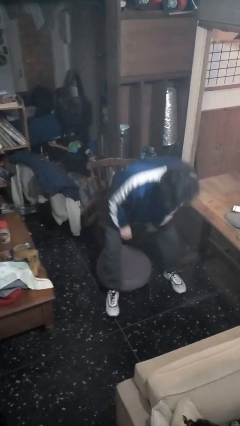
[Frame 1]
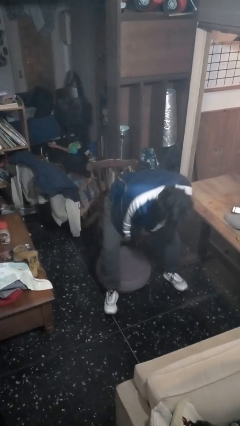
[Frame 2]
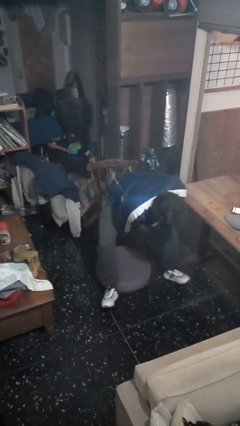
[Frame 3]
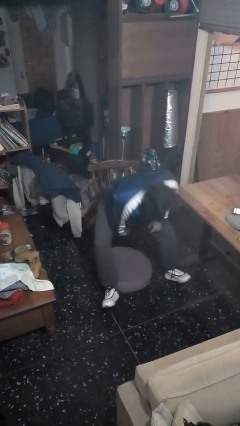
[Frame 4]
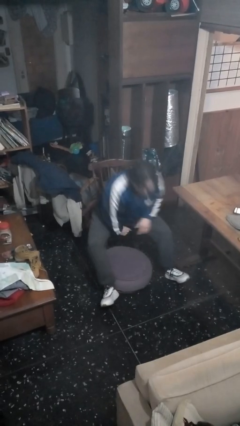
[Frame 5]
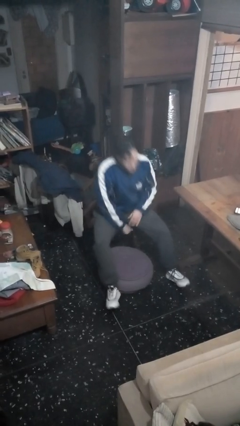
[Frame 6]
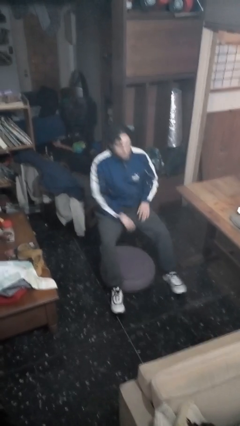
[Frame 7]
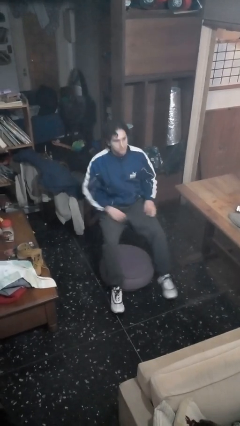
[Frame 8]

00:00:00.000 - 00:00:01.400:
person sits down

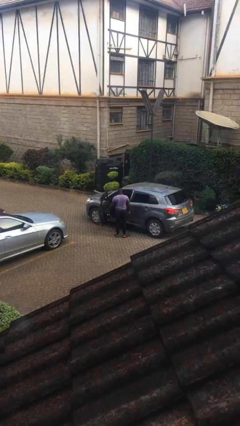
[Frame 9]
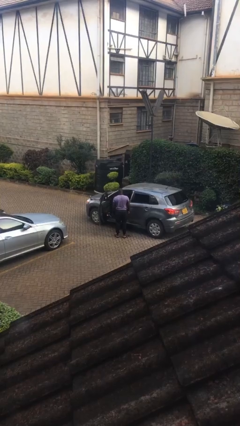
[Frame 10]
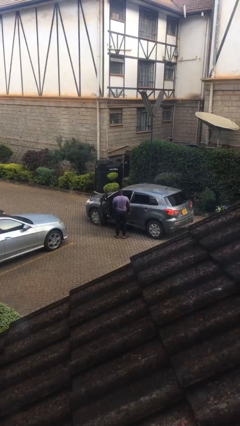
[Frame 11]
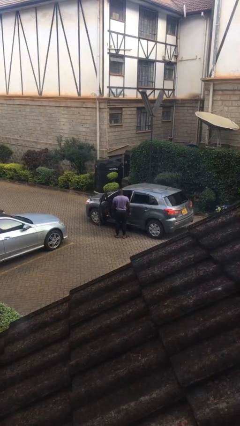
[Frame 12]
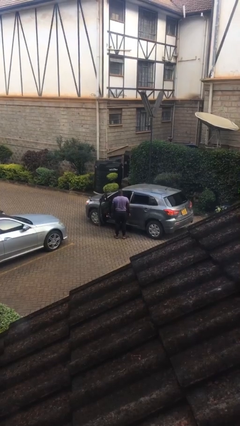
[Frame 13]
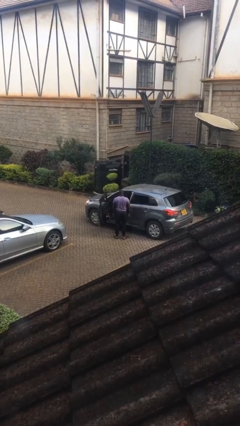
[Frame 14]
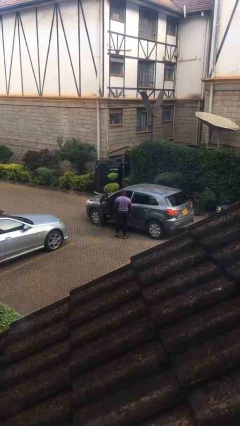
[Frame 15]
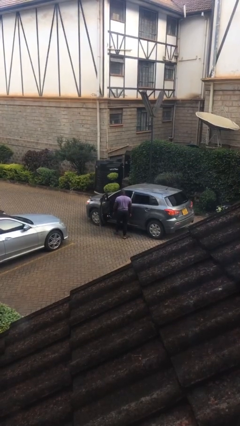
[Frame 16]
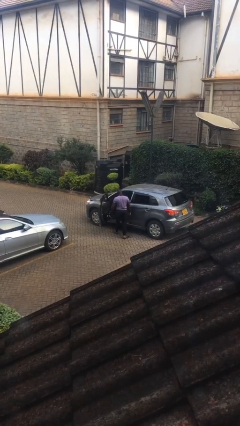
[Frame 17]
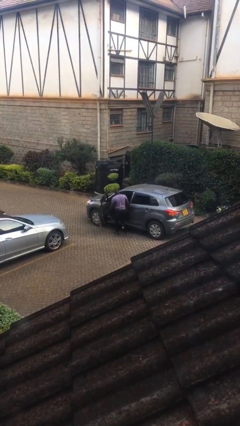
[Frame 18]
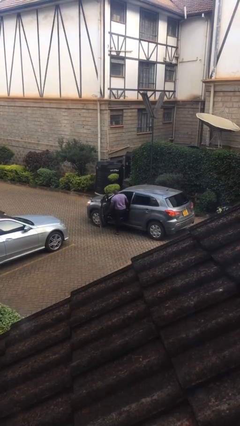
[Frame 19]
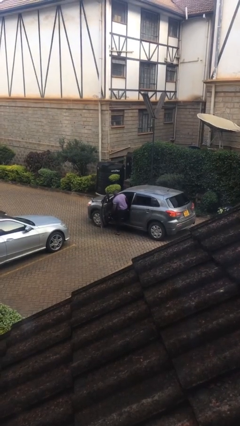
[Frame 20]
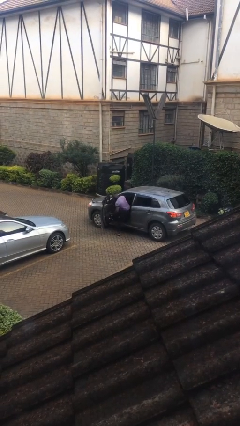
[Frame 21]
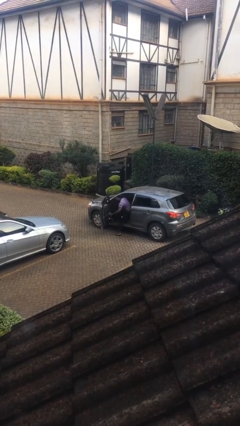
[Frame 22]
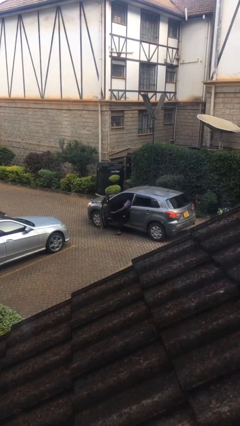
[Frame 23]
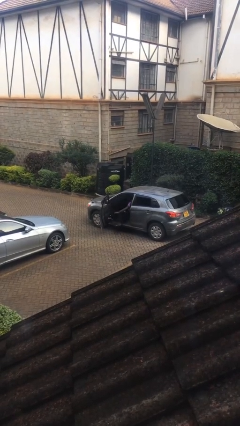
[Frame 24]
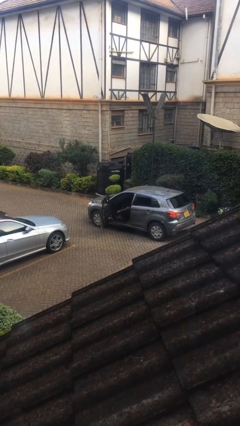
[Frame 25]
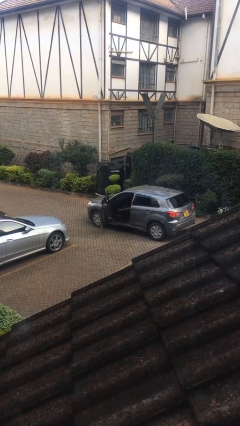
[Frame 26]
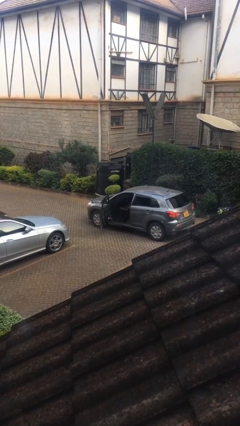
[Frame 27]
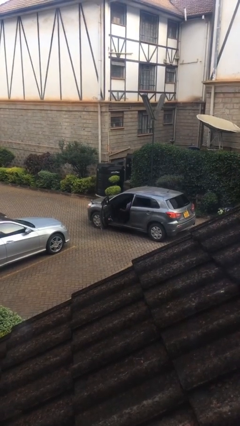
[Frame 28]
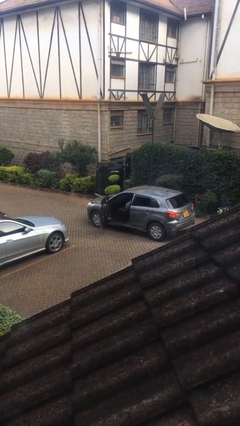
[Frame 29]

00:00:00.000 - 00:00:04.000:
person enters car

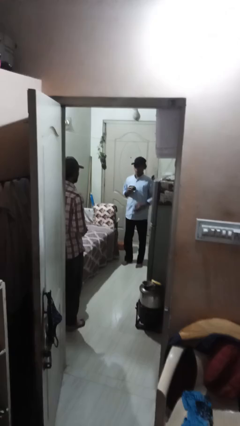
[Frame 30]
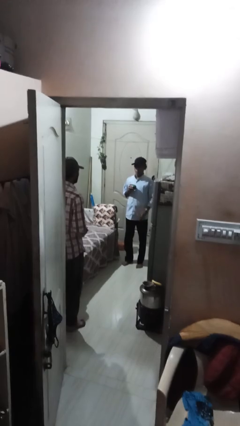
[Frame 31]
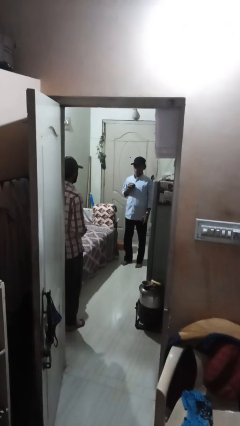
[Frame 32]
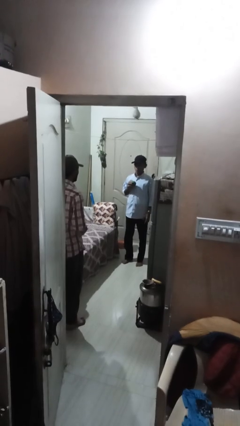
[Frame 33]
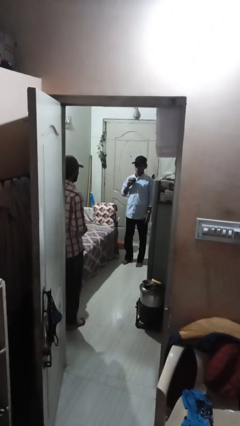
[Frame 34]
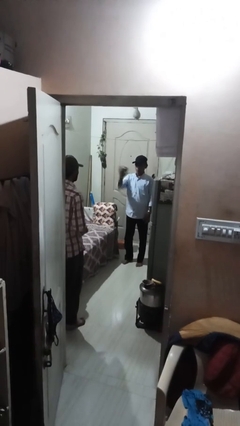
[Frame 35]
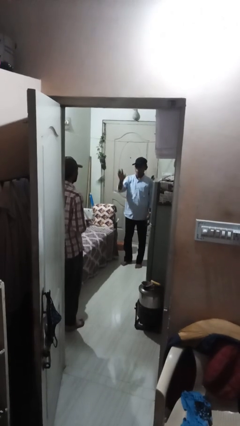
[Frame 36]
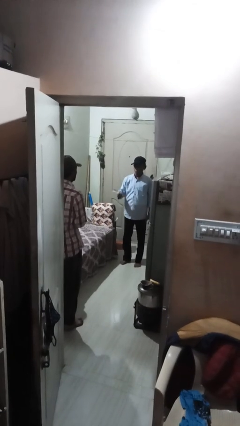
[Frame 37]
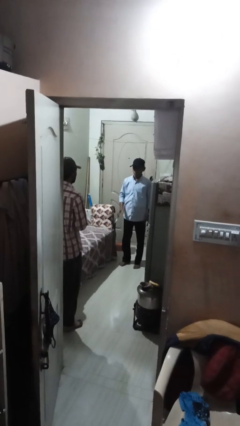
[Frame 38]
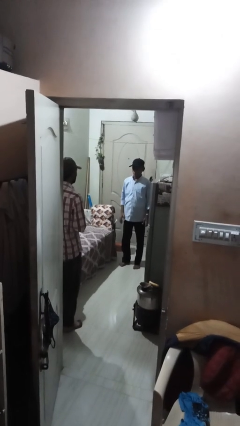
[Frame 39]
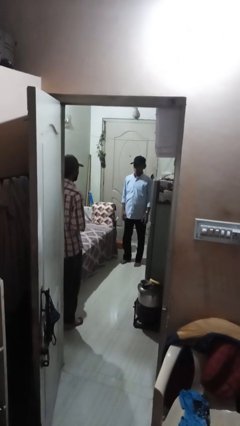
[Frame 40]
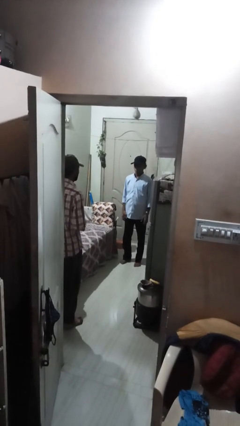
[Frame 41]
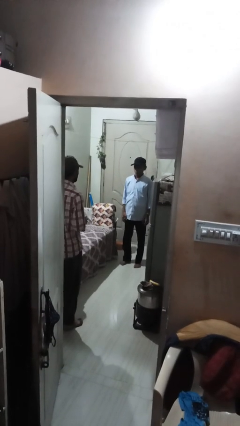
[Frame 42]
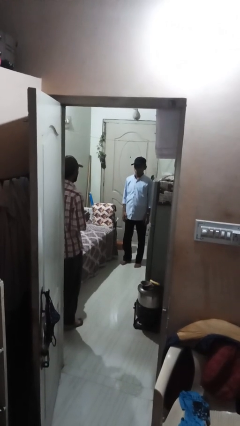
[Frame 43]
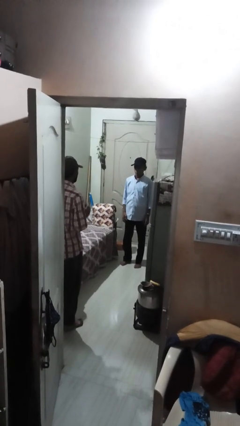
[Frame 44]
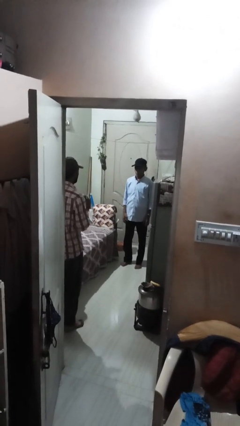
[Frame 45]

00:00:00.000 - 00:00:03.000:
person throws object to person

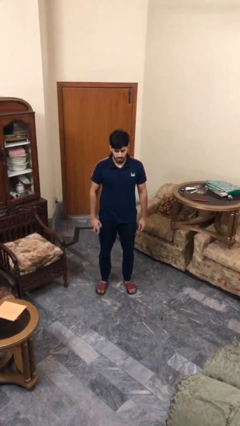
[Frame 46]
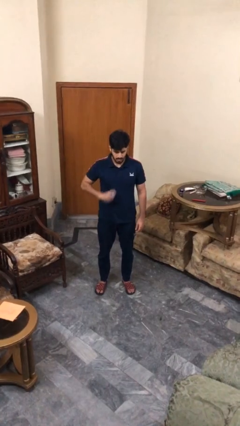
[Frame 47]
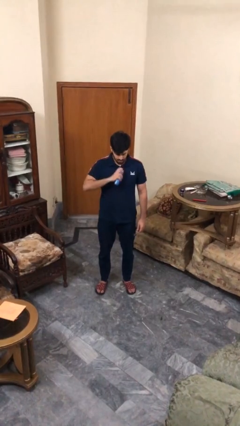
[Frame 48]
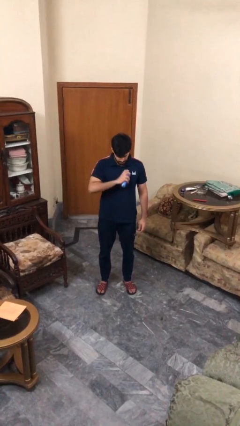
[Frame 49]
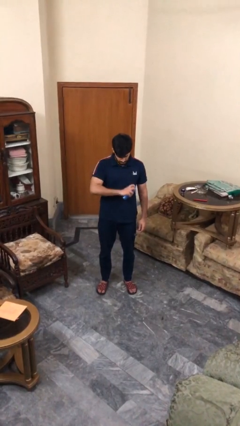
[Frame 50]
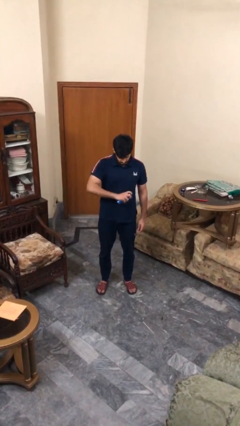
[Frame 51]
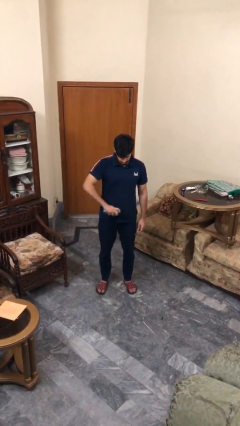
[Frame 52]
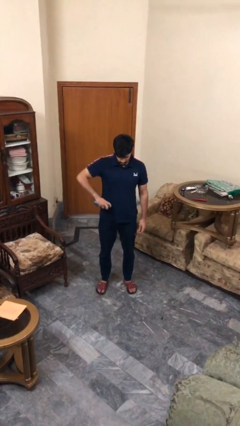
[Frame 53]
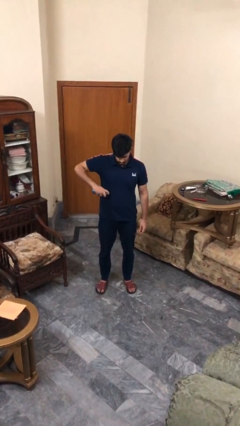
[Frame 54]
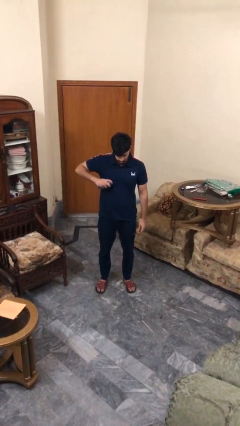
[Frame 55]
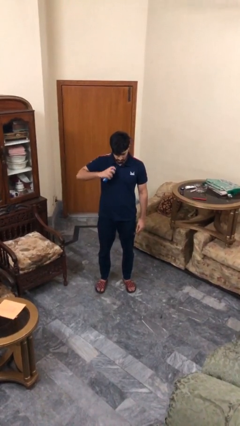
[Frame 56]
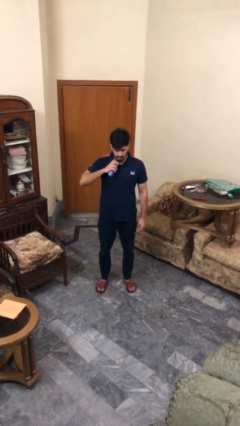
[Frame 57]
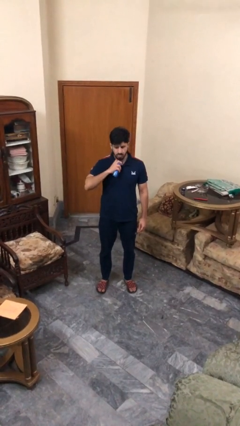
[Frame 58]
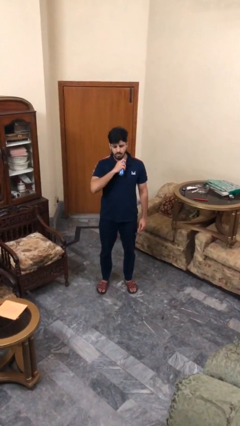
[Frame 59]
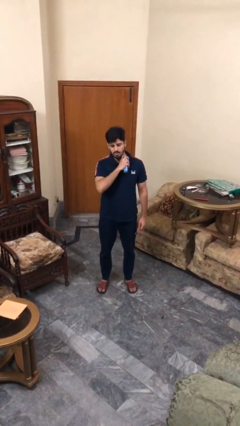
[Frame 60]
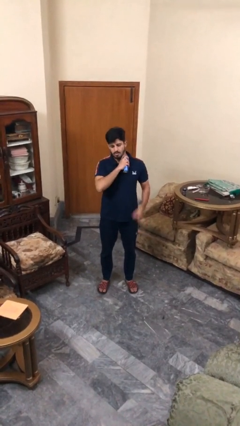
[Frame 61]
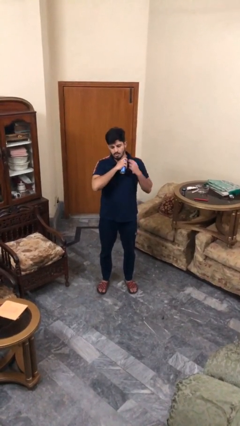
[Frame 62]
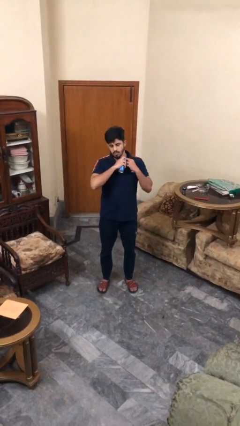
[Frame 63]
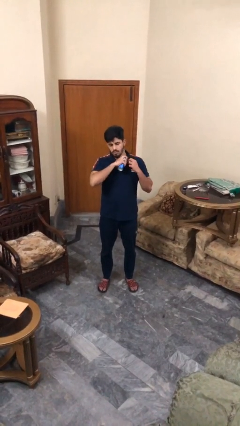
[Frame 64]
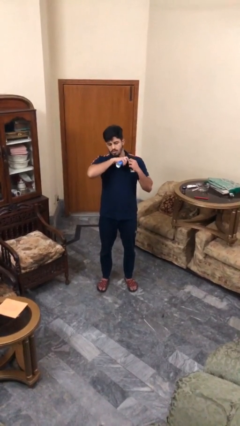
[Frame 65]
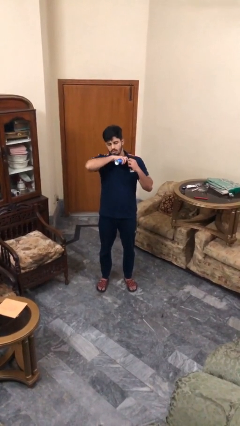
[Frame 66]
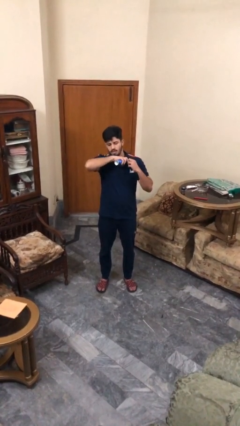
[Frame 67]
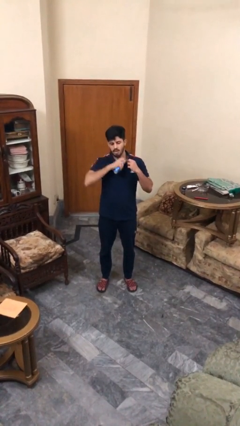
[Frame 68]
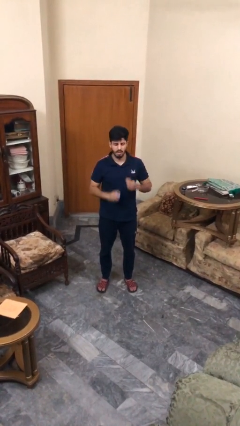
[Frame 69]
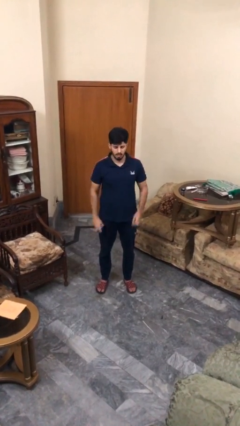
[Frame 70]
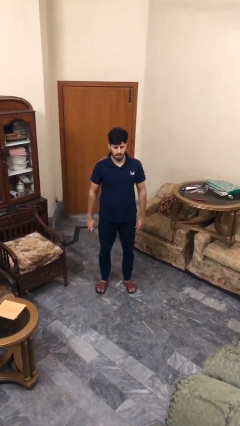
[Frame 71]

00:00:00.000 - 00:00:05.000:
person applies deodorant

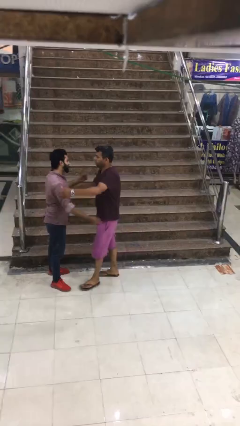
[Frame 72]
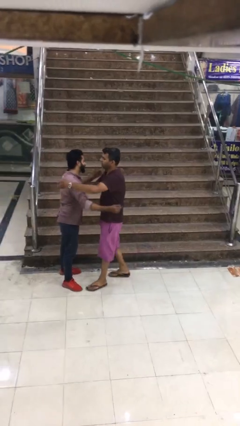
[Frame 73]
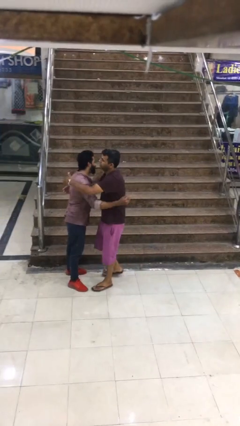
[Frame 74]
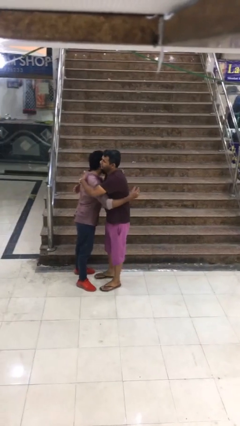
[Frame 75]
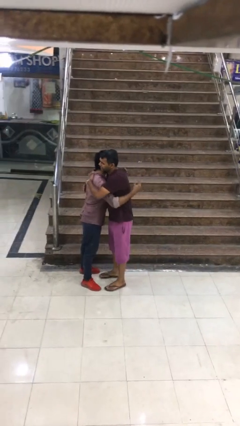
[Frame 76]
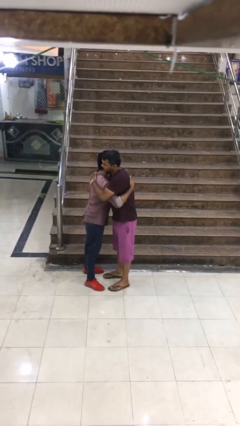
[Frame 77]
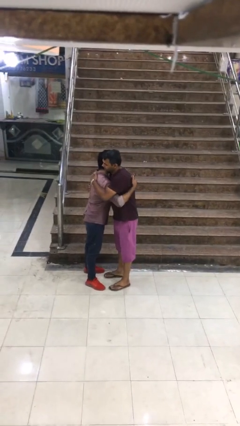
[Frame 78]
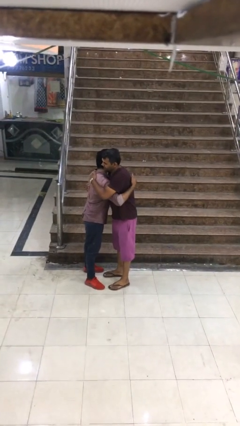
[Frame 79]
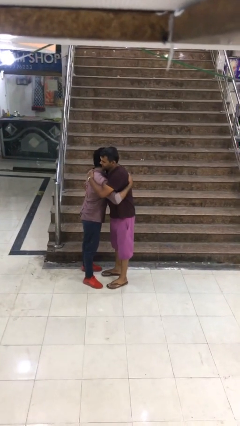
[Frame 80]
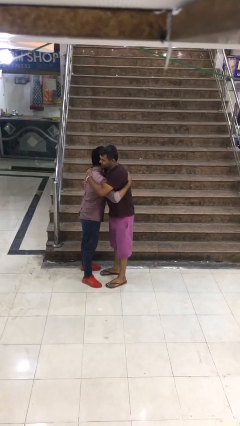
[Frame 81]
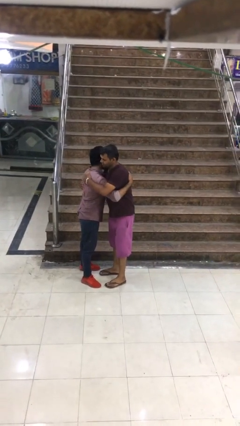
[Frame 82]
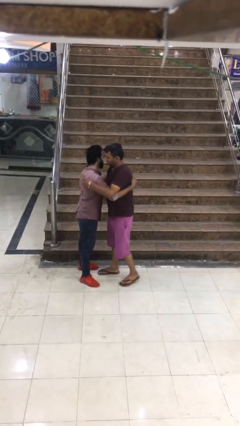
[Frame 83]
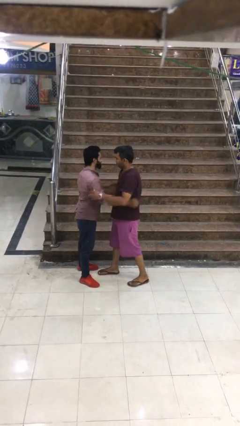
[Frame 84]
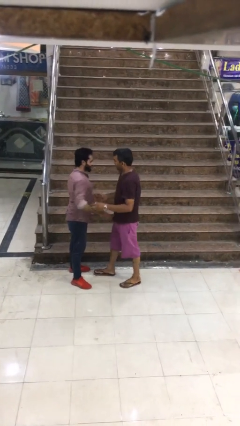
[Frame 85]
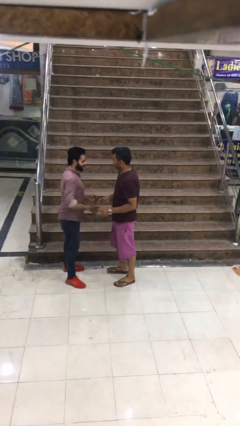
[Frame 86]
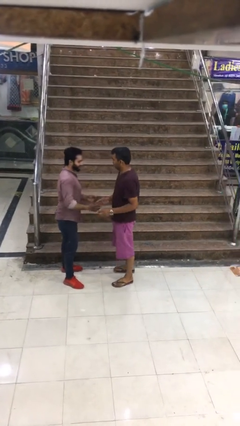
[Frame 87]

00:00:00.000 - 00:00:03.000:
person embraces person

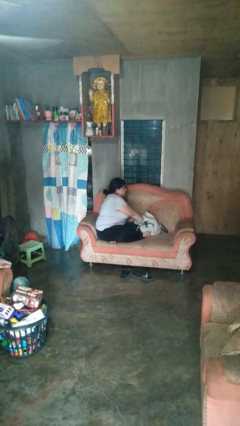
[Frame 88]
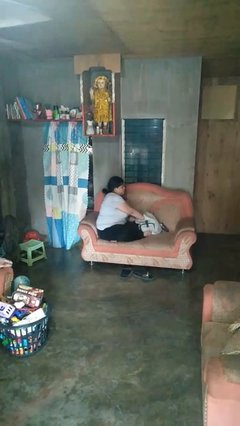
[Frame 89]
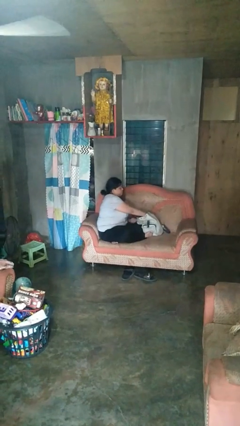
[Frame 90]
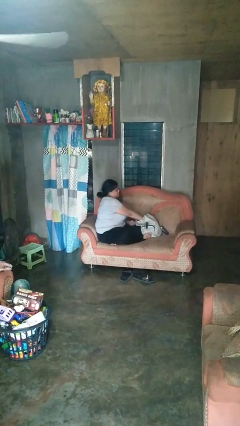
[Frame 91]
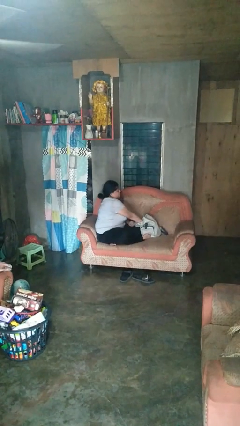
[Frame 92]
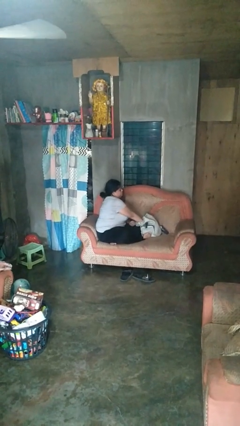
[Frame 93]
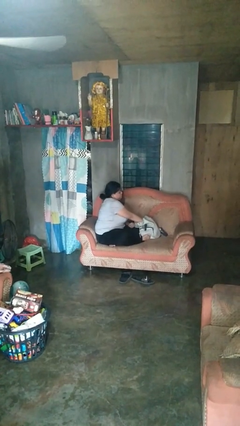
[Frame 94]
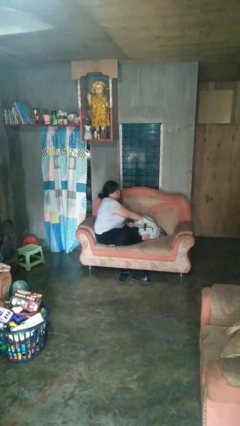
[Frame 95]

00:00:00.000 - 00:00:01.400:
person takes object from backpack
